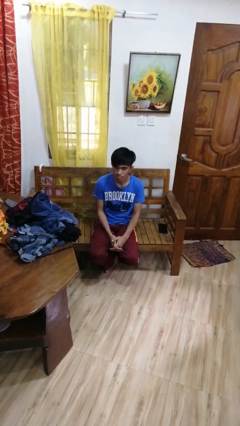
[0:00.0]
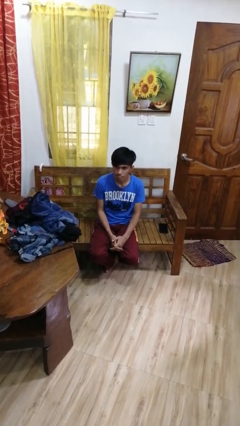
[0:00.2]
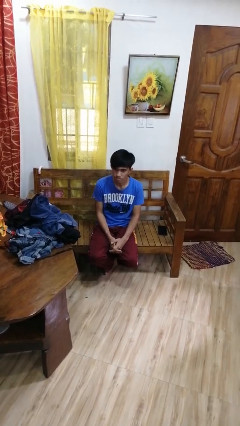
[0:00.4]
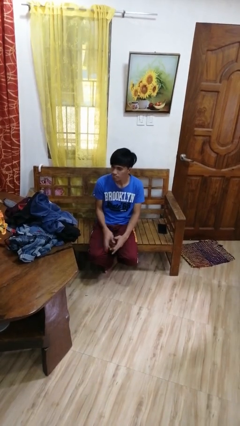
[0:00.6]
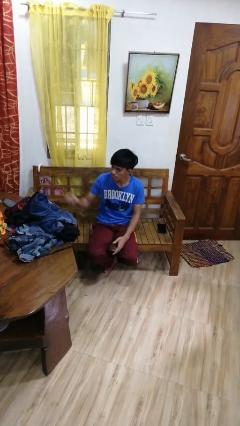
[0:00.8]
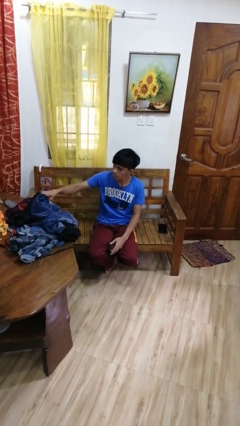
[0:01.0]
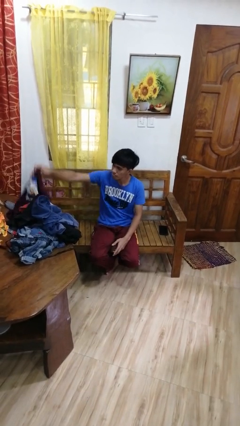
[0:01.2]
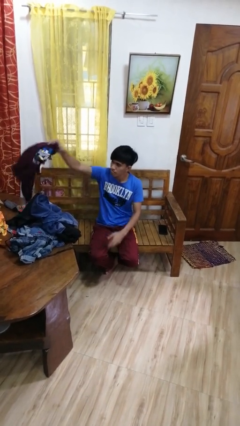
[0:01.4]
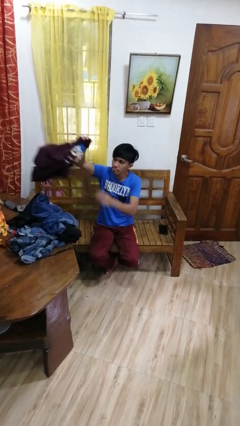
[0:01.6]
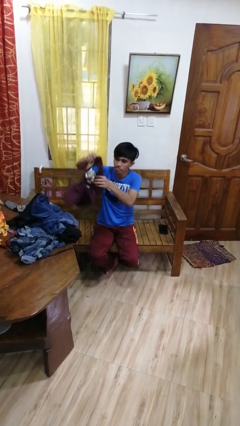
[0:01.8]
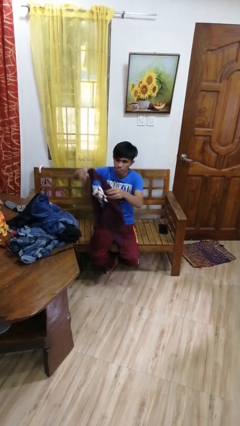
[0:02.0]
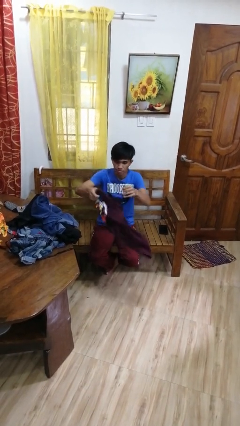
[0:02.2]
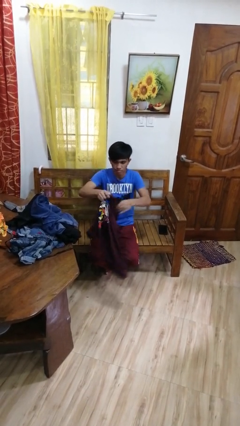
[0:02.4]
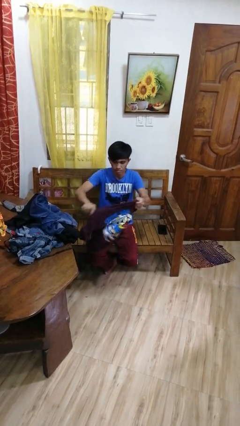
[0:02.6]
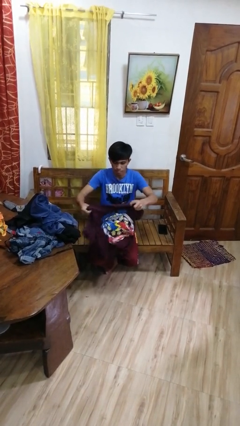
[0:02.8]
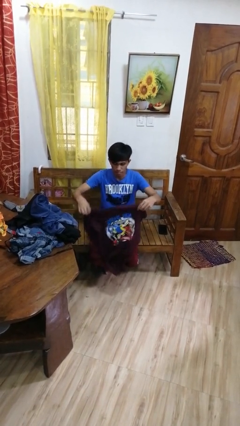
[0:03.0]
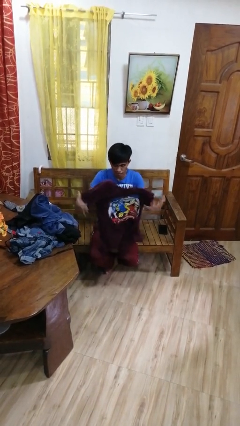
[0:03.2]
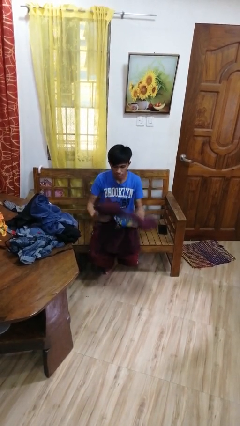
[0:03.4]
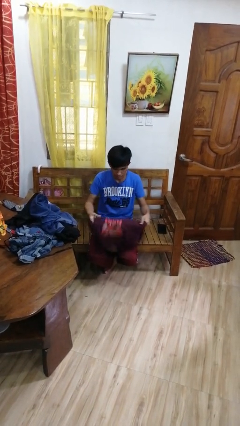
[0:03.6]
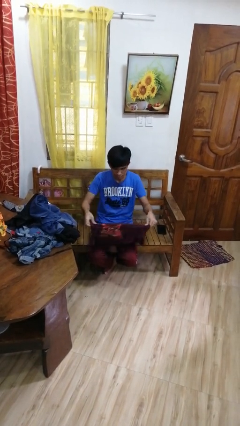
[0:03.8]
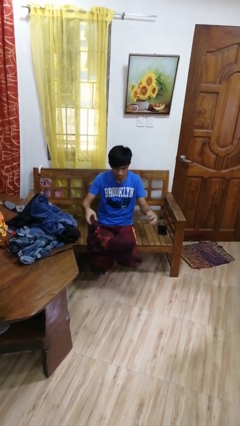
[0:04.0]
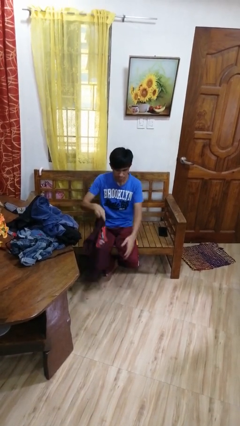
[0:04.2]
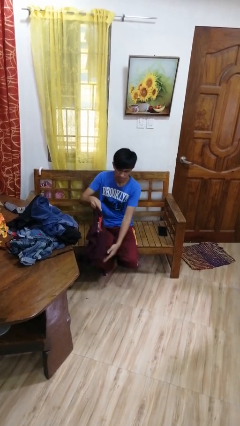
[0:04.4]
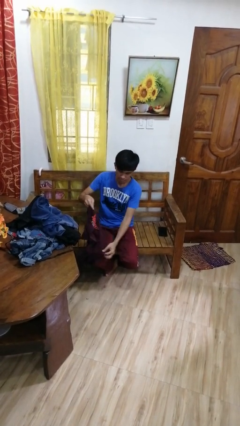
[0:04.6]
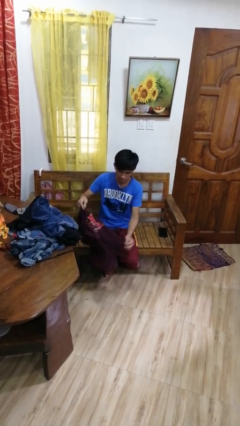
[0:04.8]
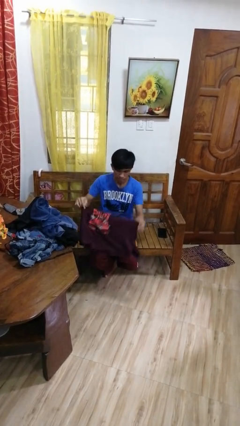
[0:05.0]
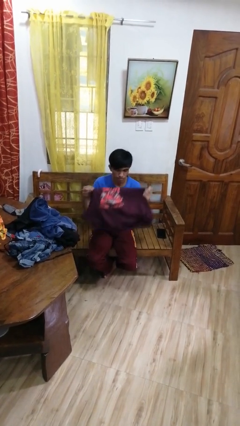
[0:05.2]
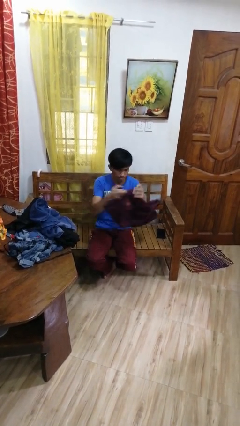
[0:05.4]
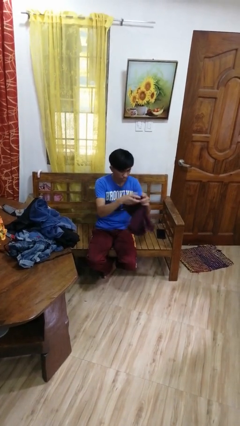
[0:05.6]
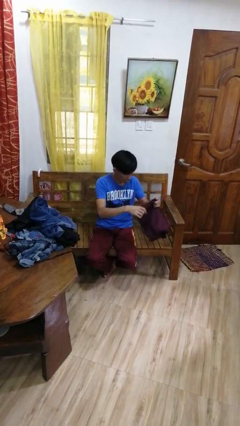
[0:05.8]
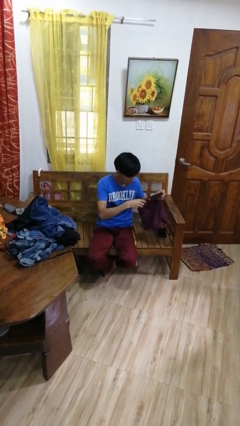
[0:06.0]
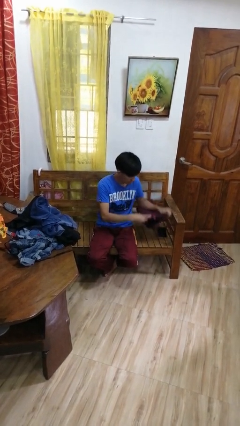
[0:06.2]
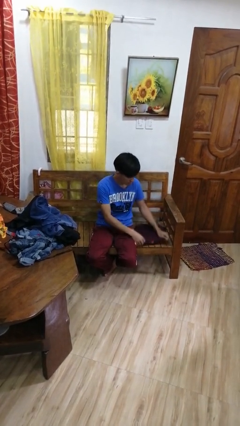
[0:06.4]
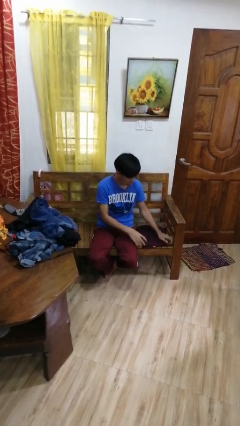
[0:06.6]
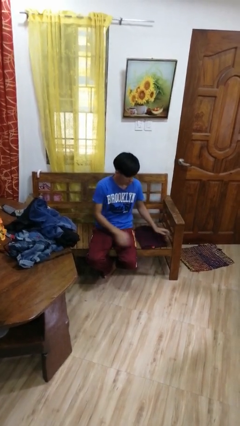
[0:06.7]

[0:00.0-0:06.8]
person folds shirt

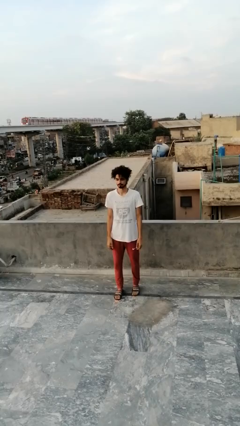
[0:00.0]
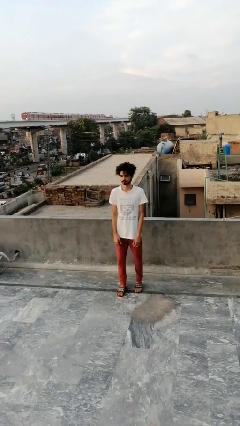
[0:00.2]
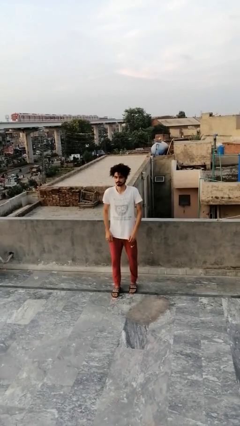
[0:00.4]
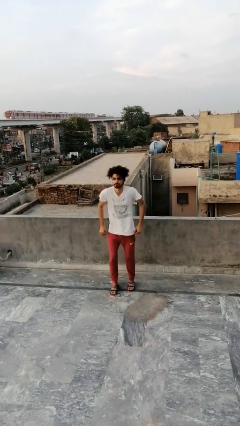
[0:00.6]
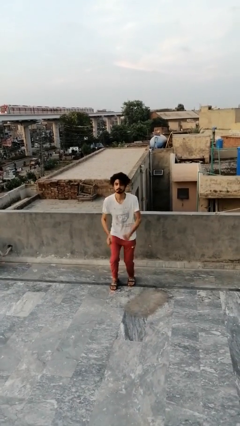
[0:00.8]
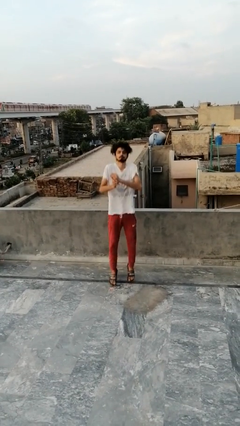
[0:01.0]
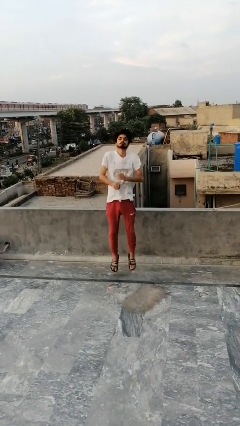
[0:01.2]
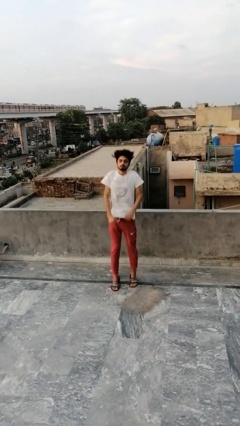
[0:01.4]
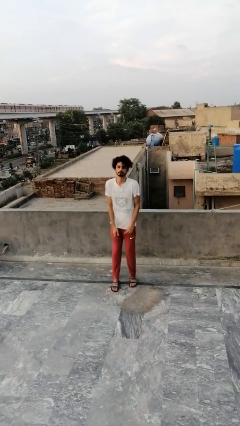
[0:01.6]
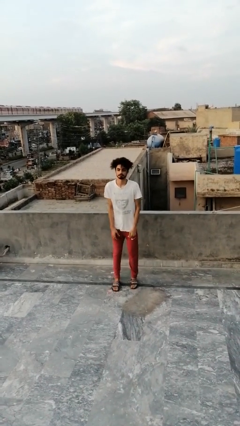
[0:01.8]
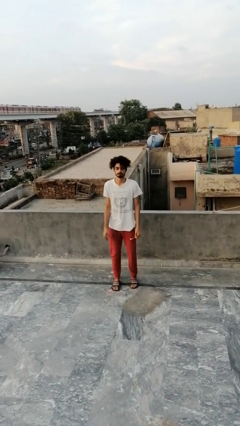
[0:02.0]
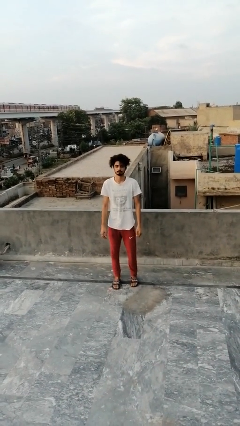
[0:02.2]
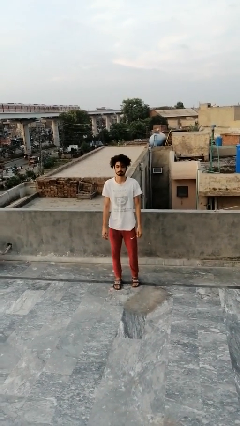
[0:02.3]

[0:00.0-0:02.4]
person jumps

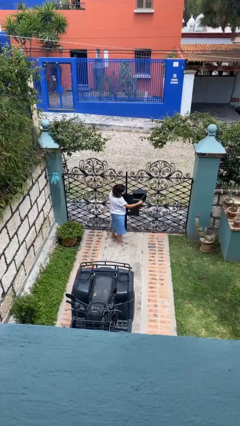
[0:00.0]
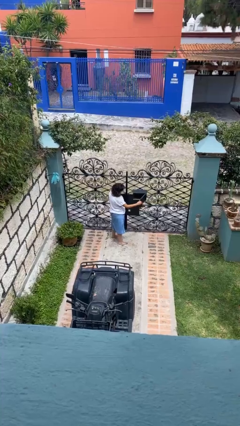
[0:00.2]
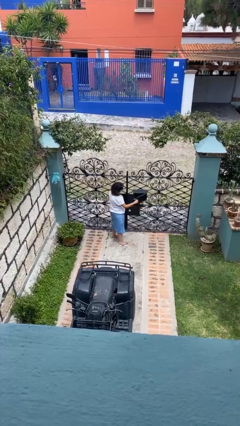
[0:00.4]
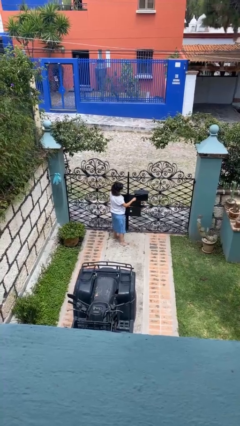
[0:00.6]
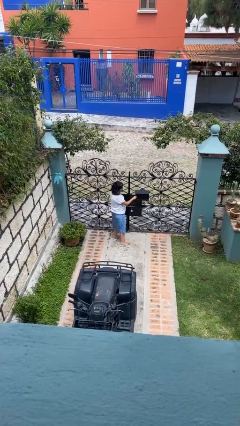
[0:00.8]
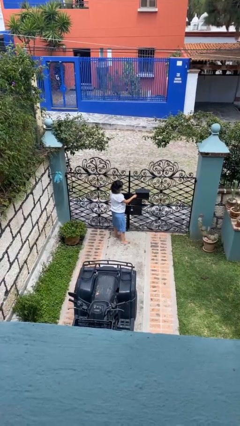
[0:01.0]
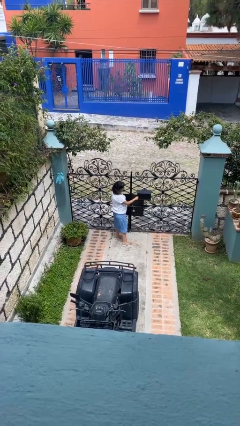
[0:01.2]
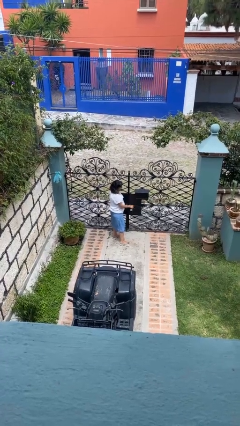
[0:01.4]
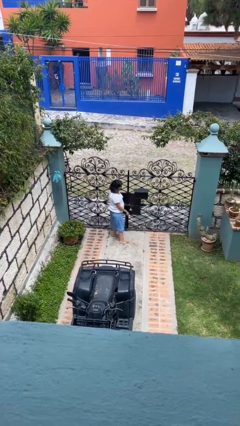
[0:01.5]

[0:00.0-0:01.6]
person closes mailbox

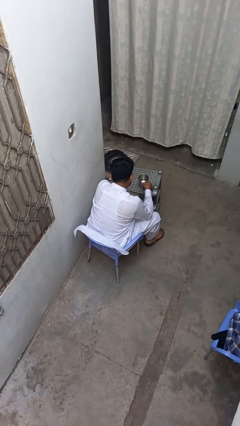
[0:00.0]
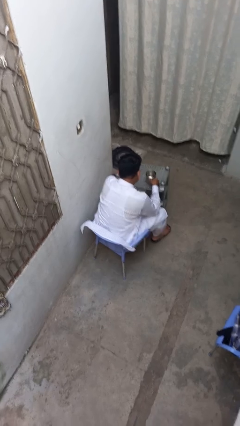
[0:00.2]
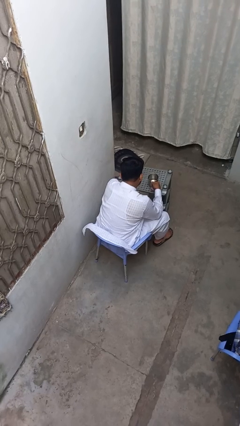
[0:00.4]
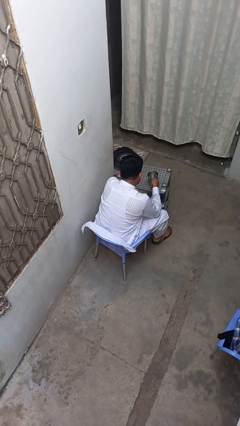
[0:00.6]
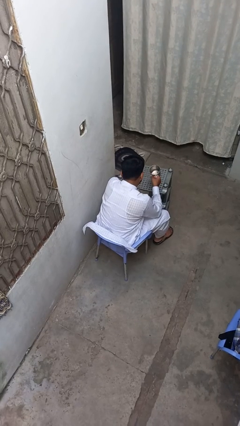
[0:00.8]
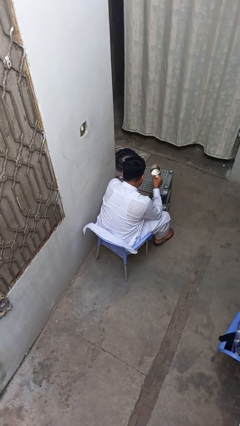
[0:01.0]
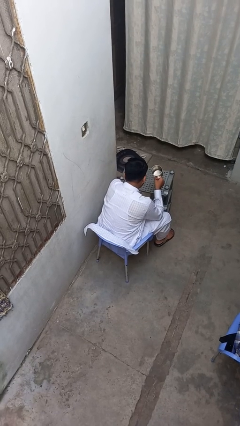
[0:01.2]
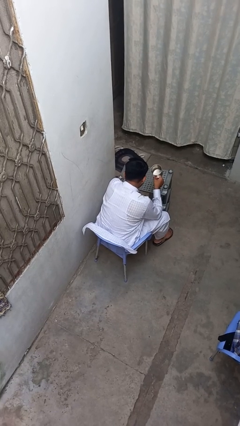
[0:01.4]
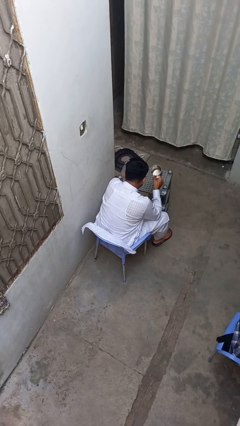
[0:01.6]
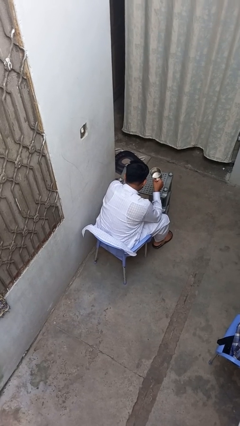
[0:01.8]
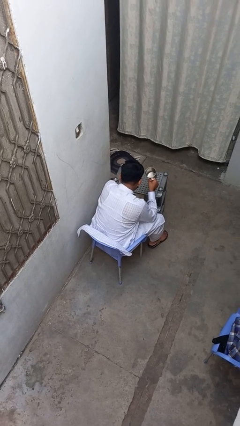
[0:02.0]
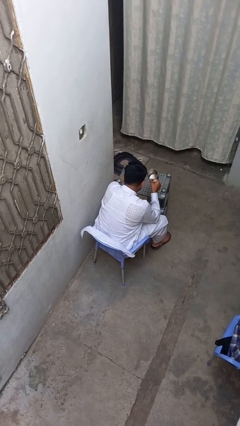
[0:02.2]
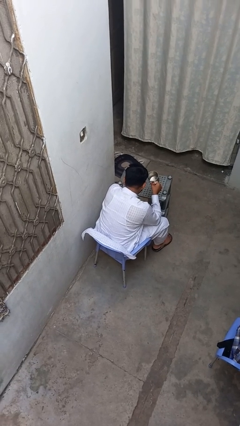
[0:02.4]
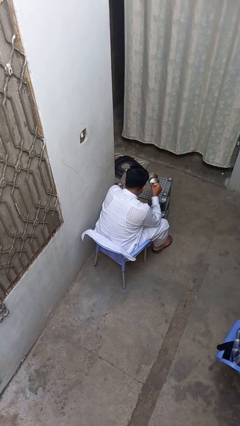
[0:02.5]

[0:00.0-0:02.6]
person picks up object from table

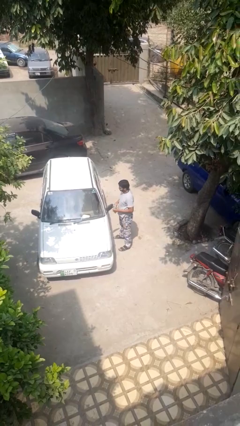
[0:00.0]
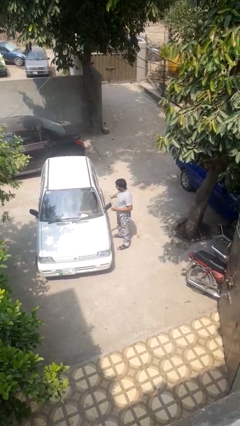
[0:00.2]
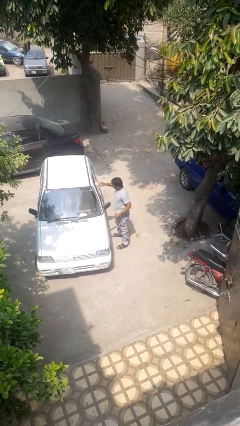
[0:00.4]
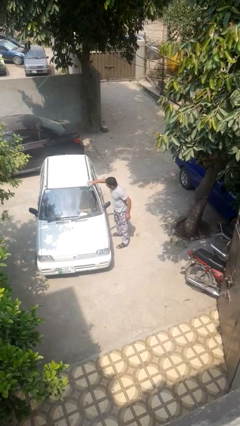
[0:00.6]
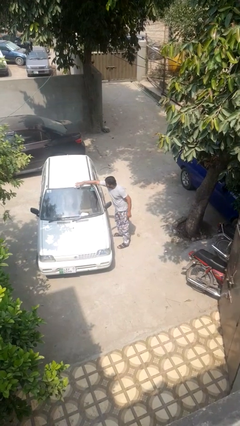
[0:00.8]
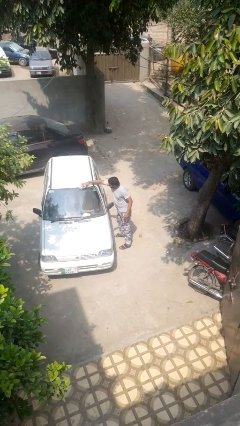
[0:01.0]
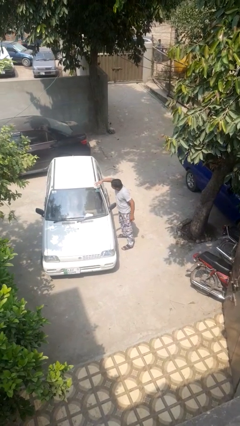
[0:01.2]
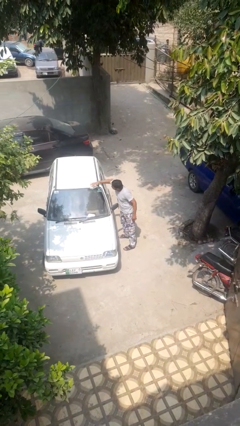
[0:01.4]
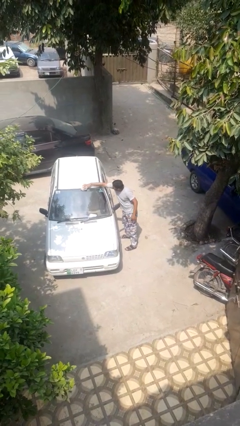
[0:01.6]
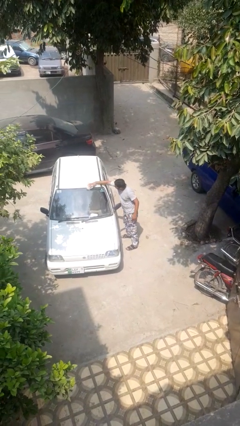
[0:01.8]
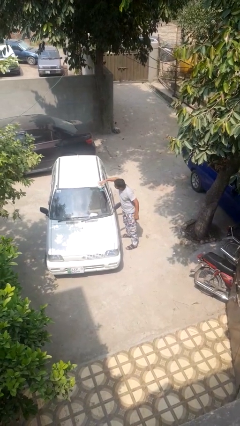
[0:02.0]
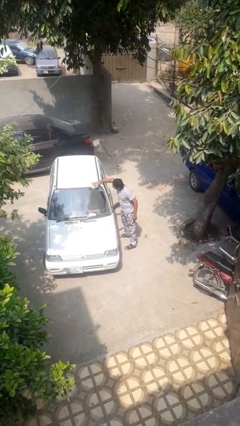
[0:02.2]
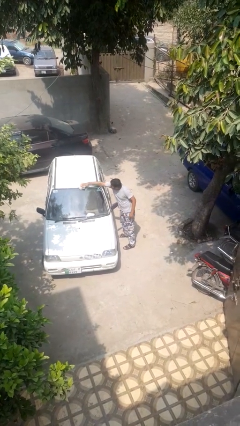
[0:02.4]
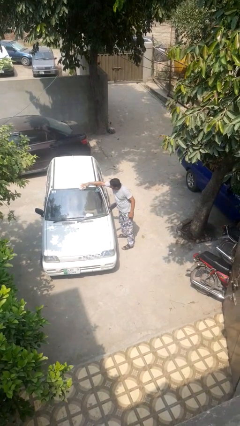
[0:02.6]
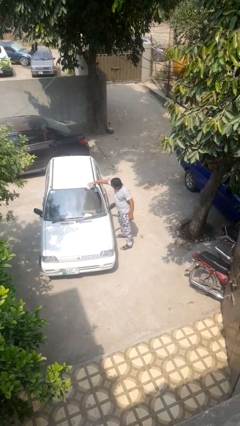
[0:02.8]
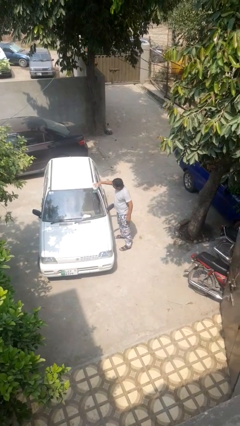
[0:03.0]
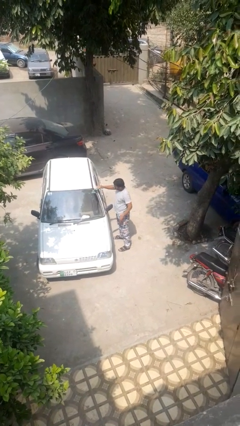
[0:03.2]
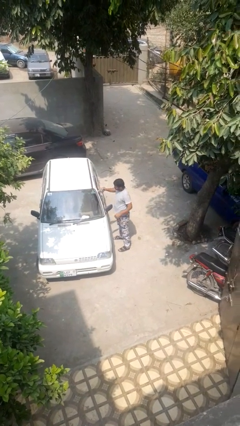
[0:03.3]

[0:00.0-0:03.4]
person polishes car with rag

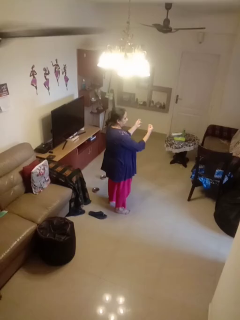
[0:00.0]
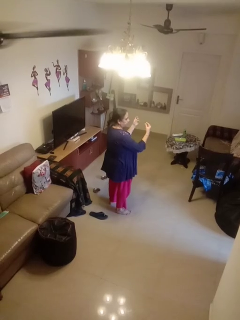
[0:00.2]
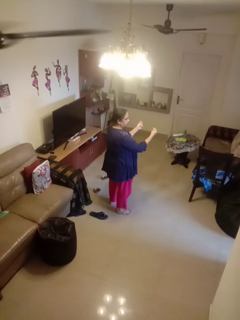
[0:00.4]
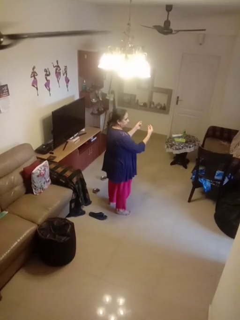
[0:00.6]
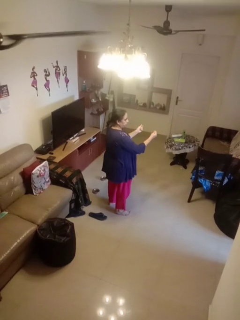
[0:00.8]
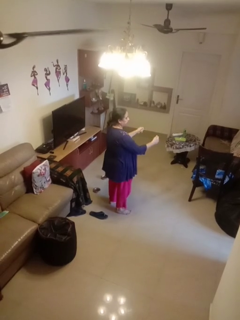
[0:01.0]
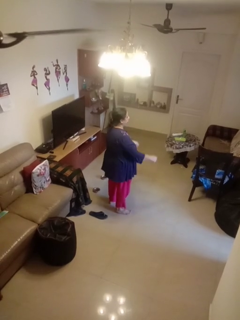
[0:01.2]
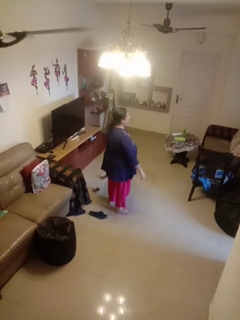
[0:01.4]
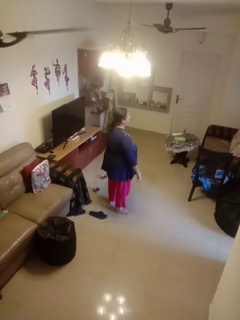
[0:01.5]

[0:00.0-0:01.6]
person snaps fingers
